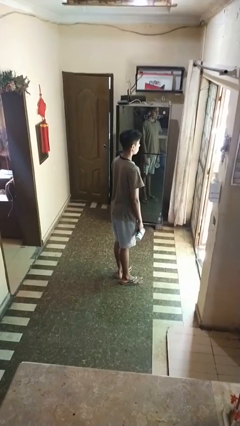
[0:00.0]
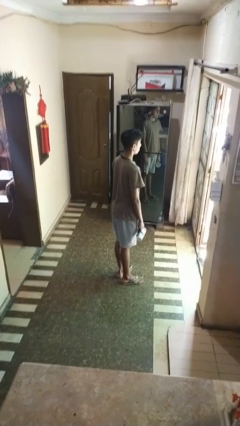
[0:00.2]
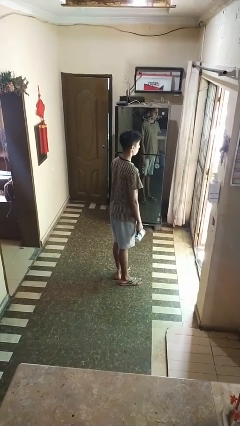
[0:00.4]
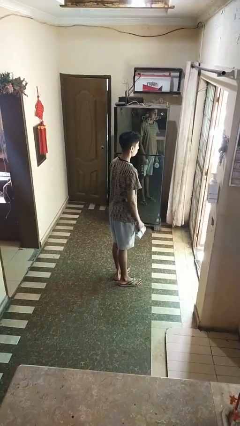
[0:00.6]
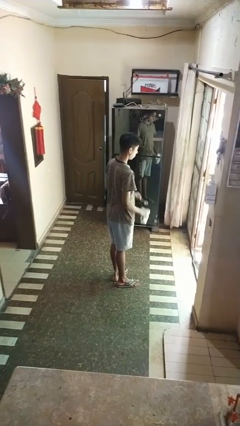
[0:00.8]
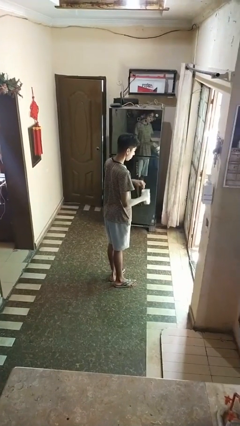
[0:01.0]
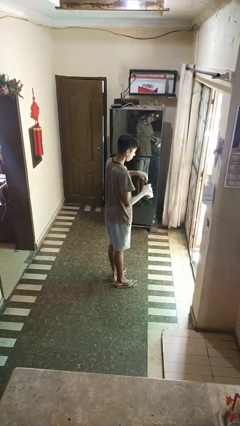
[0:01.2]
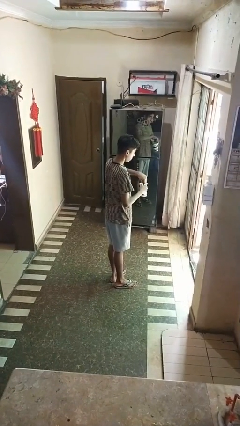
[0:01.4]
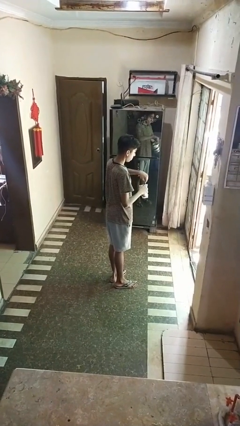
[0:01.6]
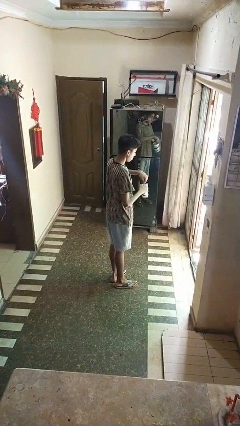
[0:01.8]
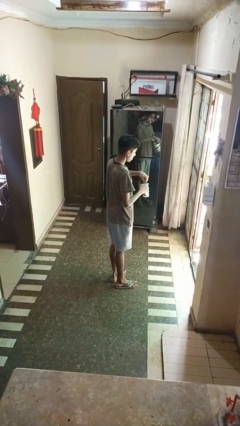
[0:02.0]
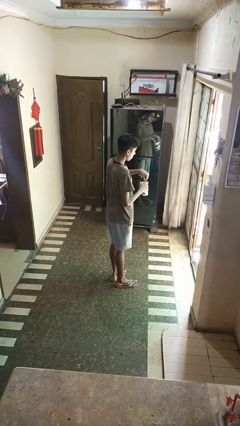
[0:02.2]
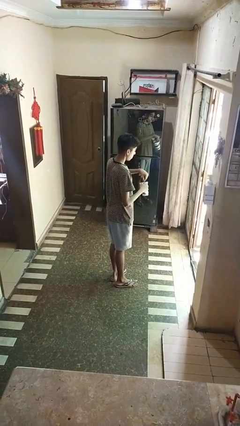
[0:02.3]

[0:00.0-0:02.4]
person stirs mug

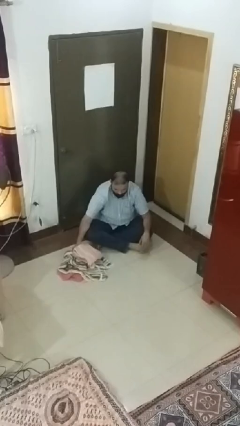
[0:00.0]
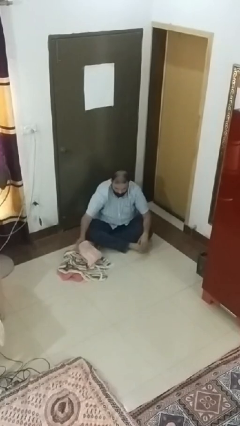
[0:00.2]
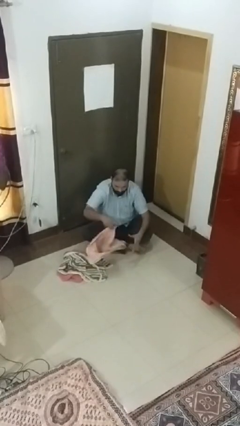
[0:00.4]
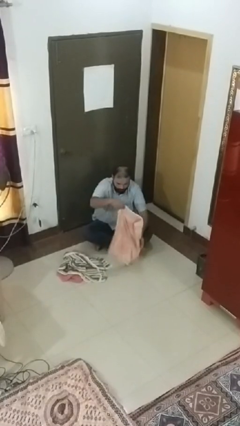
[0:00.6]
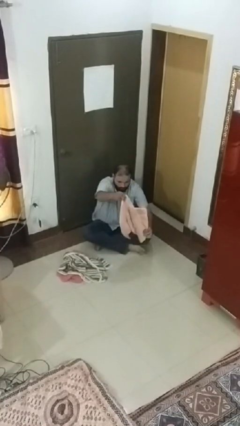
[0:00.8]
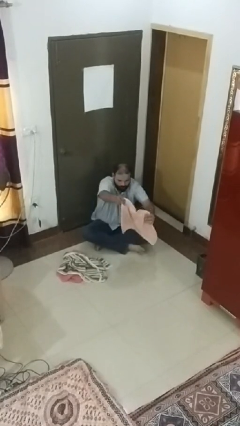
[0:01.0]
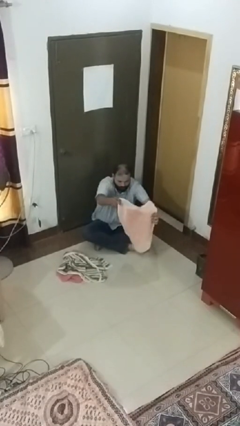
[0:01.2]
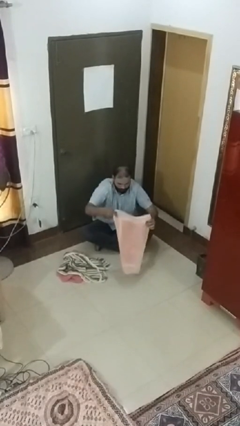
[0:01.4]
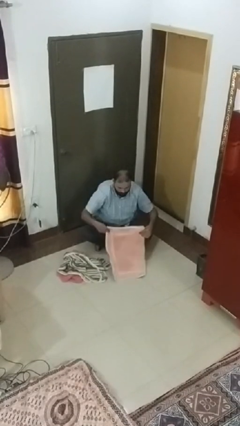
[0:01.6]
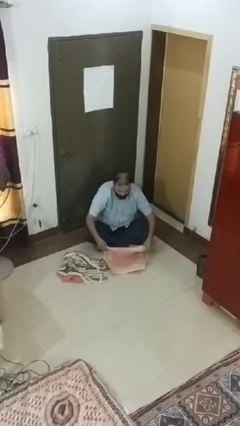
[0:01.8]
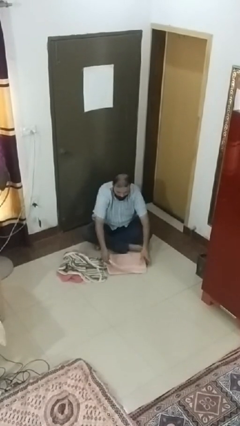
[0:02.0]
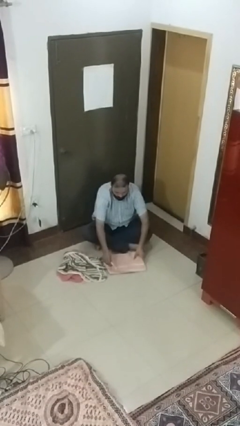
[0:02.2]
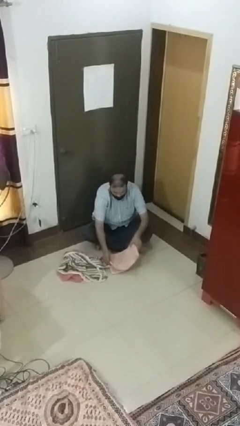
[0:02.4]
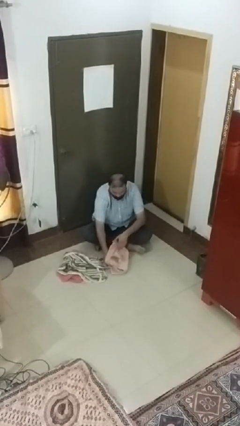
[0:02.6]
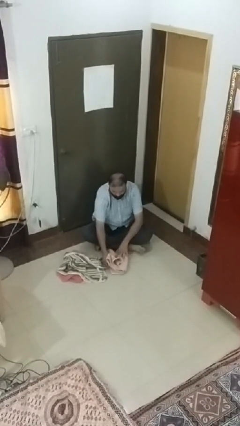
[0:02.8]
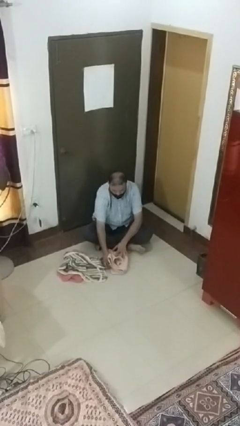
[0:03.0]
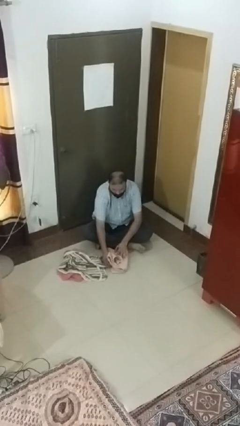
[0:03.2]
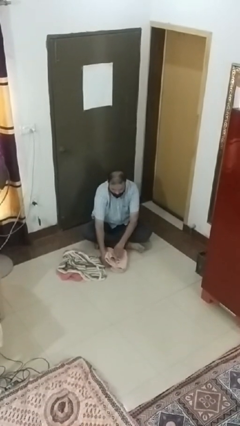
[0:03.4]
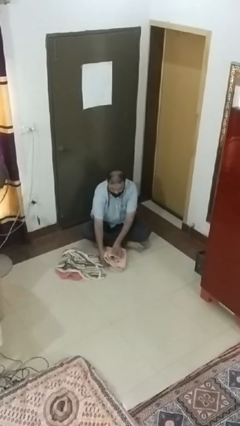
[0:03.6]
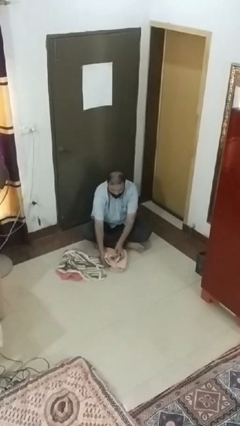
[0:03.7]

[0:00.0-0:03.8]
person folds towel

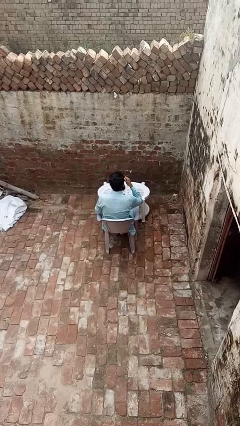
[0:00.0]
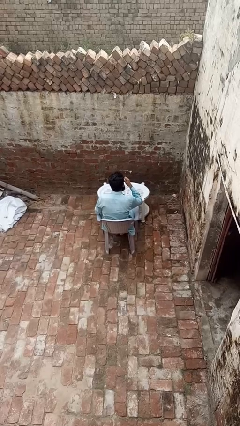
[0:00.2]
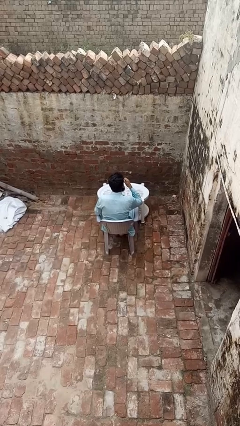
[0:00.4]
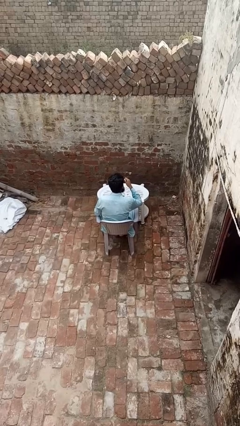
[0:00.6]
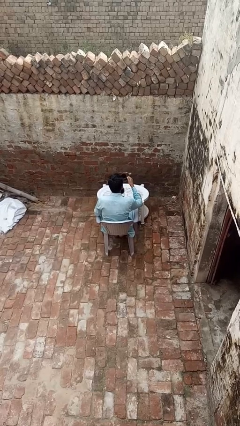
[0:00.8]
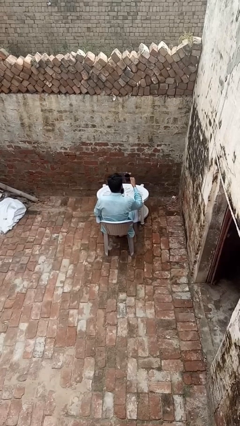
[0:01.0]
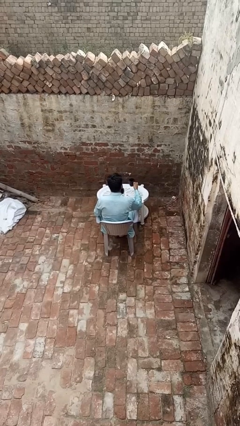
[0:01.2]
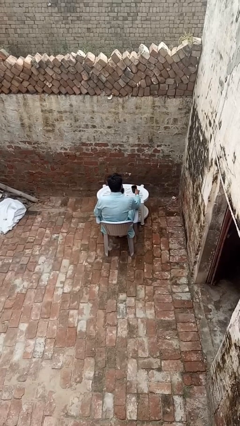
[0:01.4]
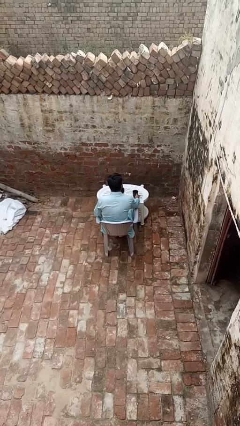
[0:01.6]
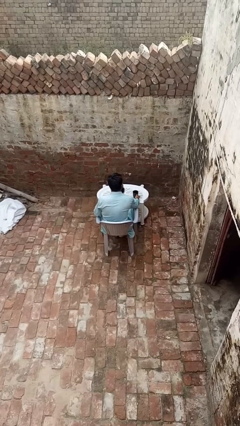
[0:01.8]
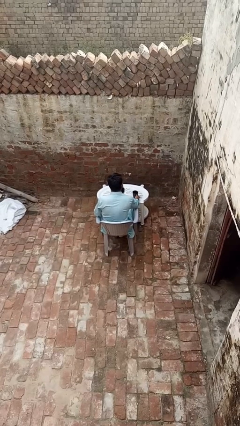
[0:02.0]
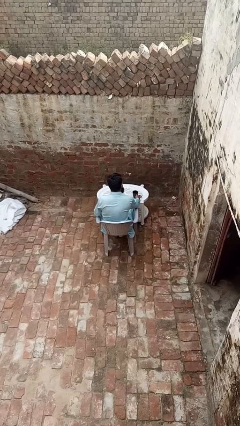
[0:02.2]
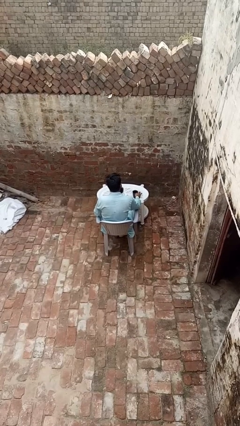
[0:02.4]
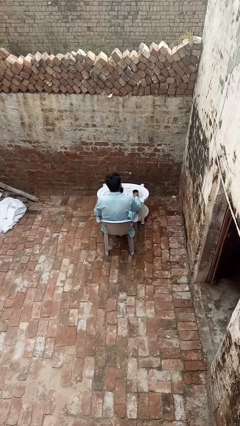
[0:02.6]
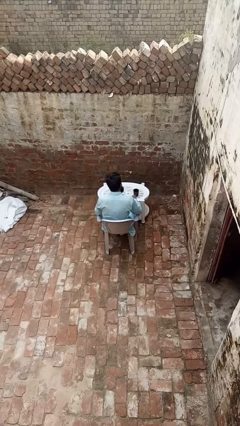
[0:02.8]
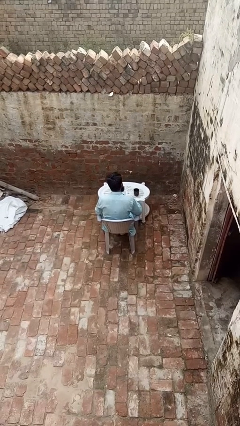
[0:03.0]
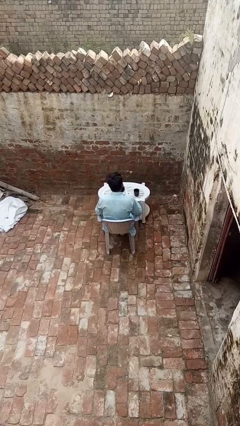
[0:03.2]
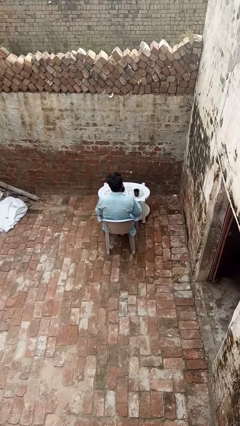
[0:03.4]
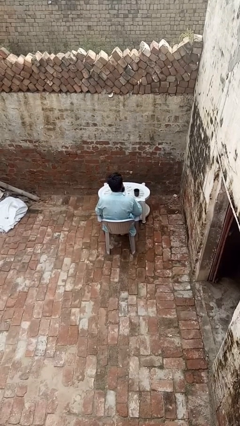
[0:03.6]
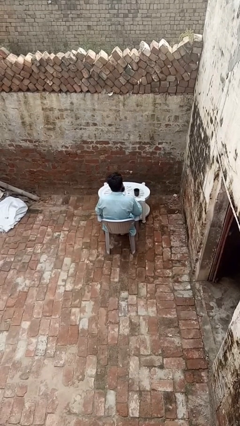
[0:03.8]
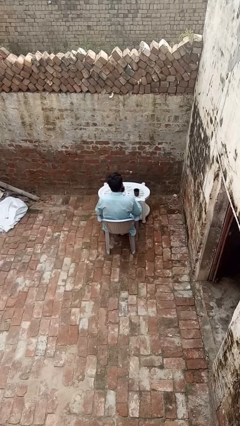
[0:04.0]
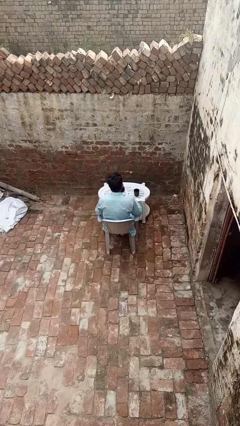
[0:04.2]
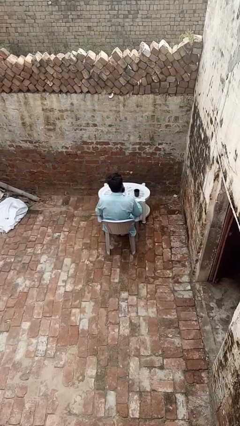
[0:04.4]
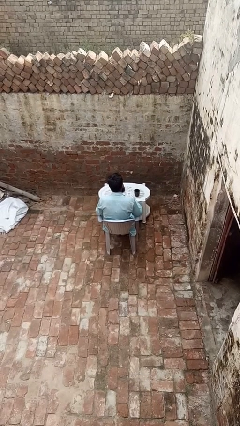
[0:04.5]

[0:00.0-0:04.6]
person puts down object on table

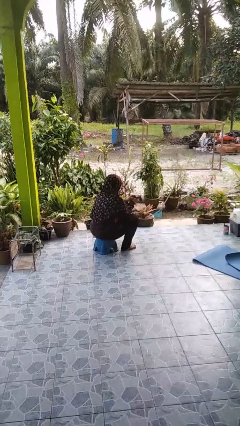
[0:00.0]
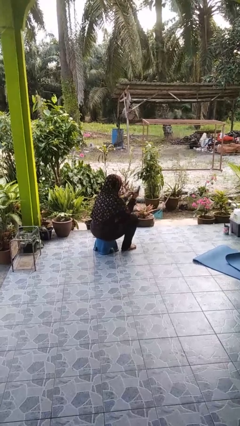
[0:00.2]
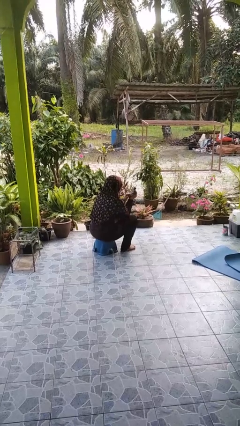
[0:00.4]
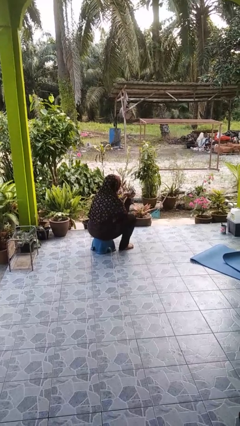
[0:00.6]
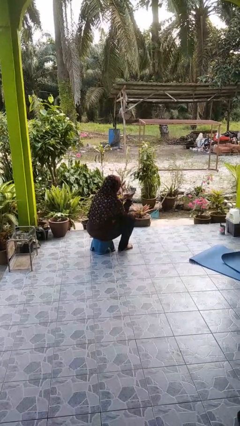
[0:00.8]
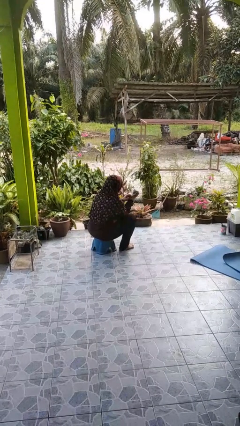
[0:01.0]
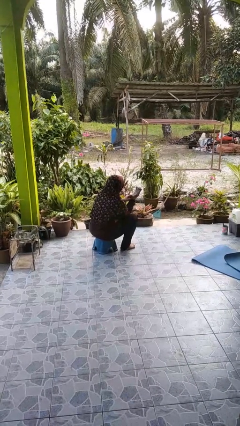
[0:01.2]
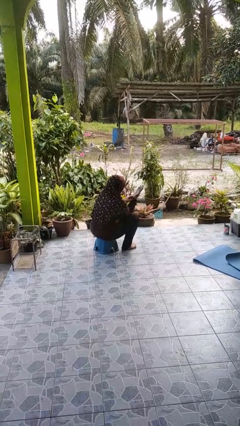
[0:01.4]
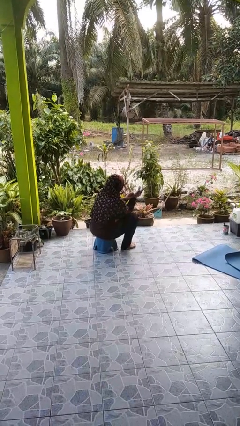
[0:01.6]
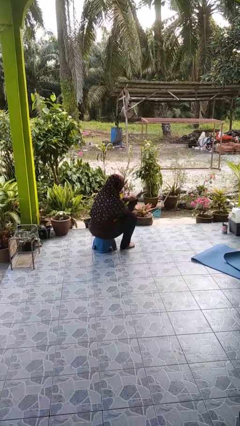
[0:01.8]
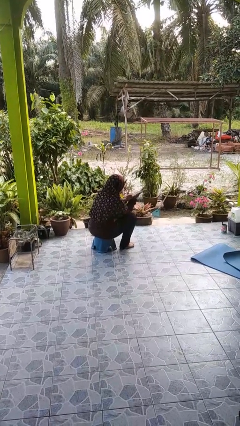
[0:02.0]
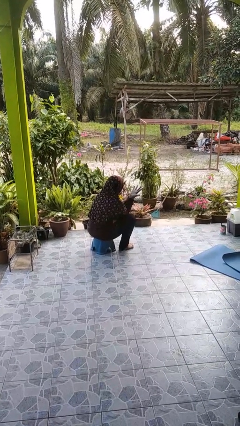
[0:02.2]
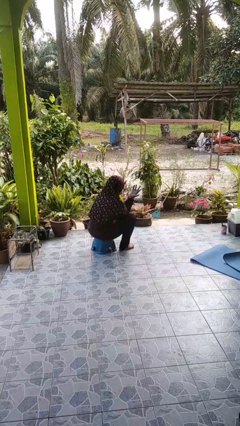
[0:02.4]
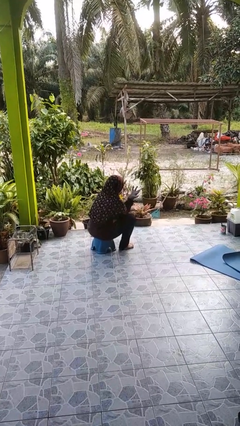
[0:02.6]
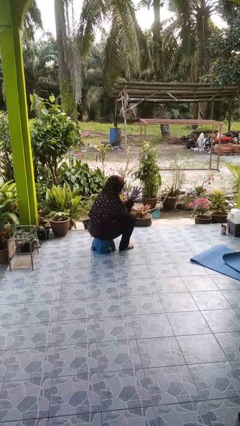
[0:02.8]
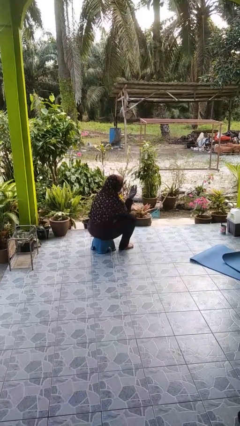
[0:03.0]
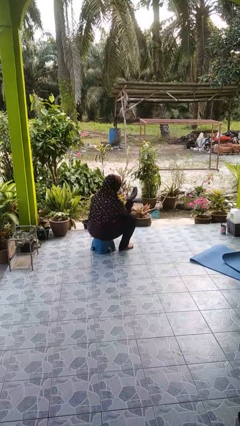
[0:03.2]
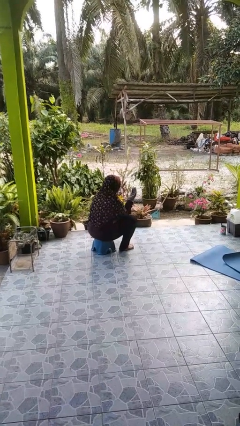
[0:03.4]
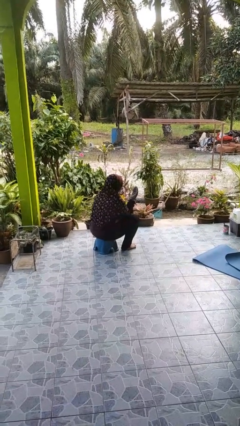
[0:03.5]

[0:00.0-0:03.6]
person puts on gloves

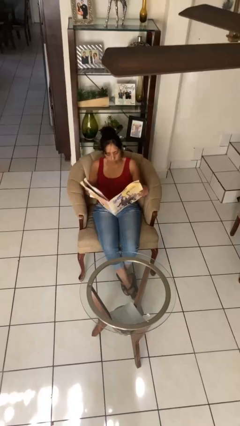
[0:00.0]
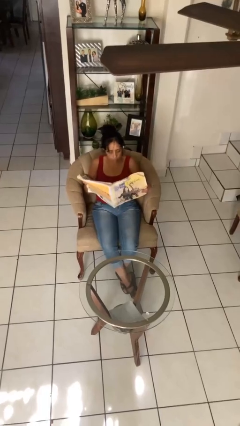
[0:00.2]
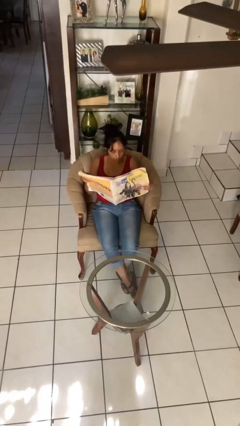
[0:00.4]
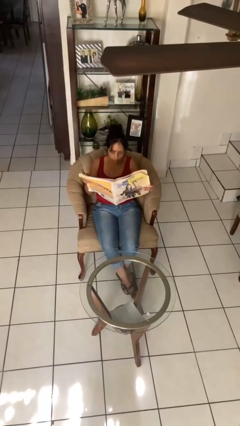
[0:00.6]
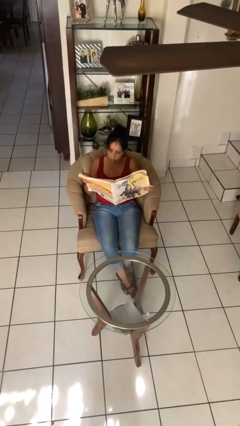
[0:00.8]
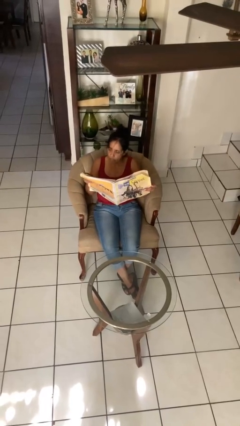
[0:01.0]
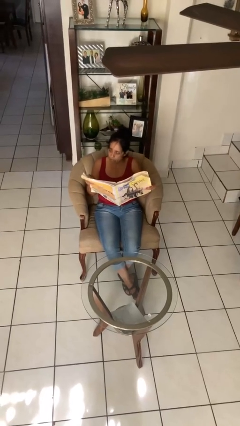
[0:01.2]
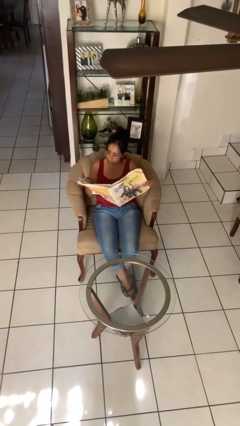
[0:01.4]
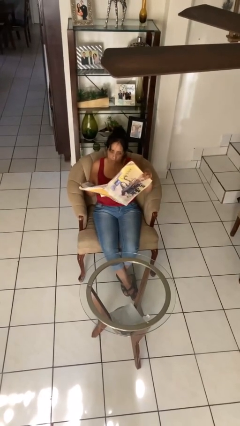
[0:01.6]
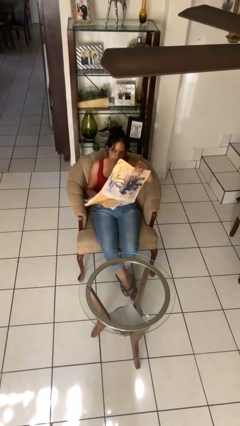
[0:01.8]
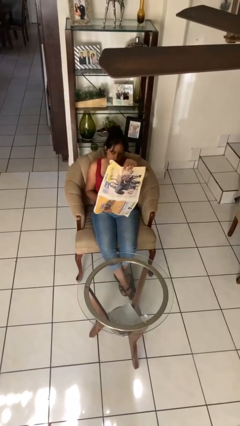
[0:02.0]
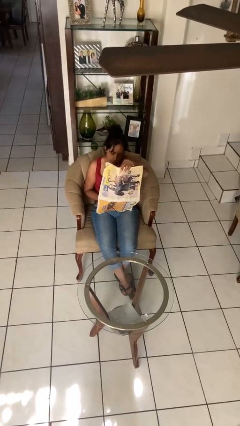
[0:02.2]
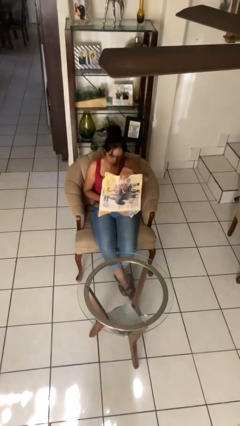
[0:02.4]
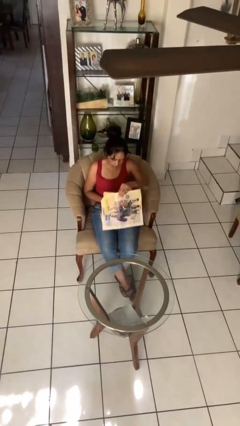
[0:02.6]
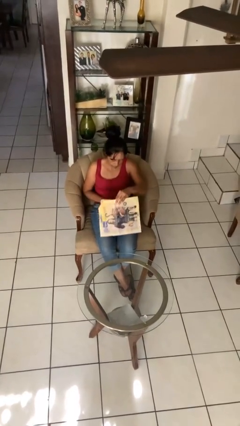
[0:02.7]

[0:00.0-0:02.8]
person reads newspaper

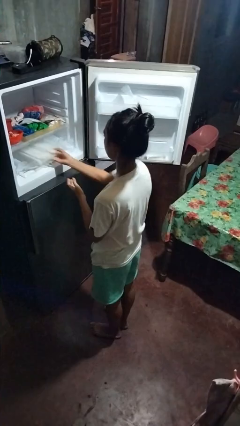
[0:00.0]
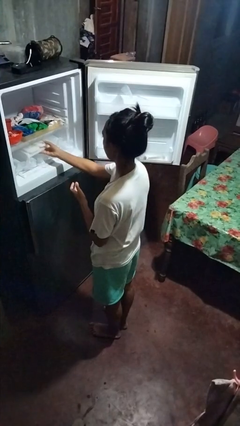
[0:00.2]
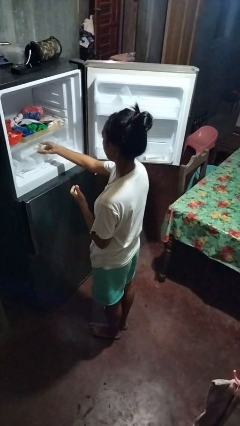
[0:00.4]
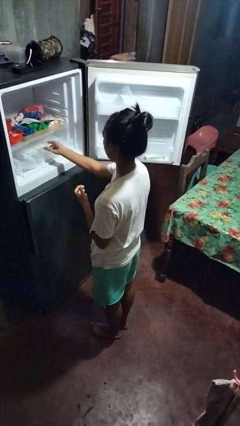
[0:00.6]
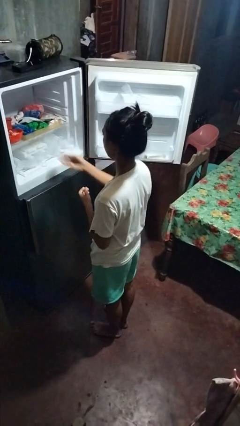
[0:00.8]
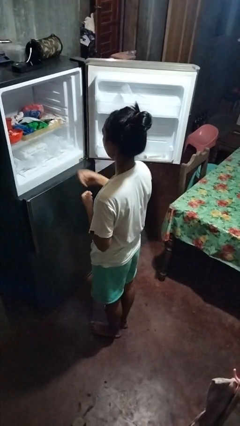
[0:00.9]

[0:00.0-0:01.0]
person puts object into refrigerator
